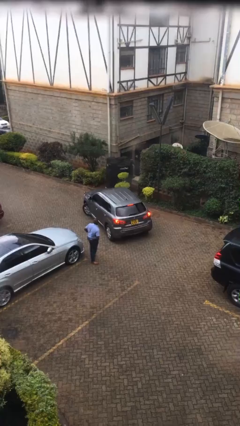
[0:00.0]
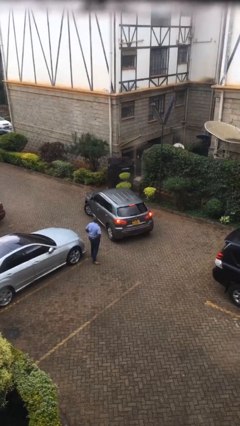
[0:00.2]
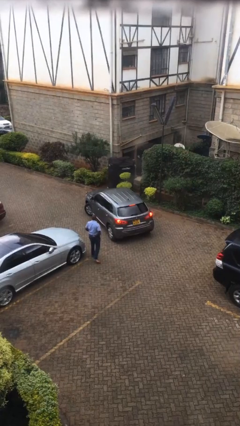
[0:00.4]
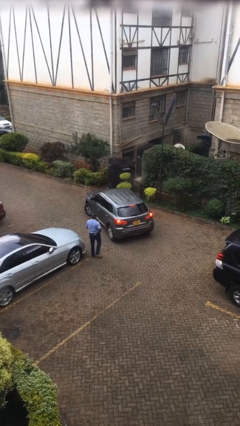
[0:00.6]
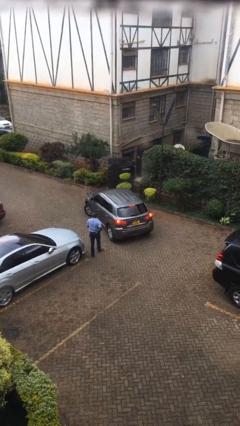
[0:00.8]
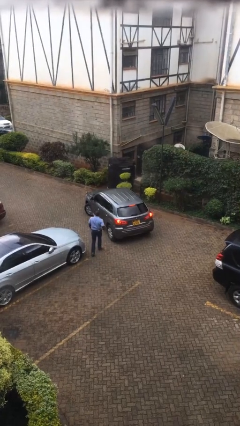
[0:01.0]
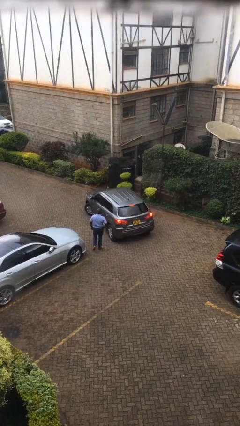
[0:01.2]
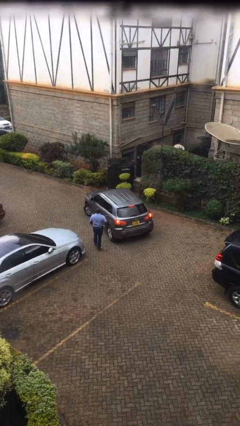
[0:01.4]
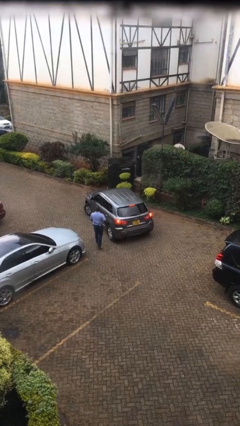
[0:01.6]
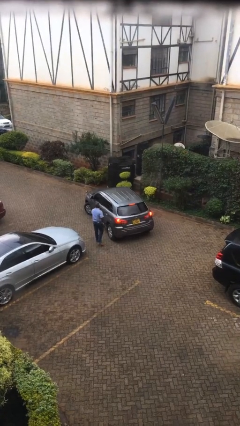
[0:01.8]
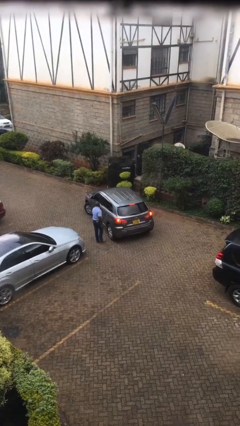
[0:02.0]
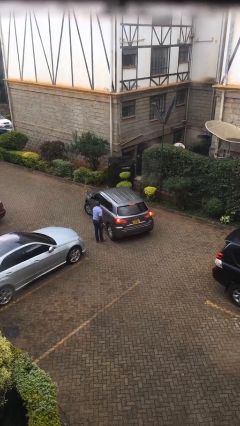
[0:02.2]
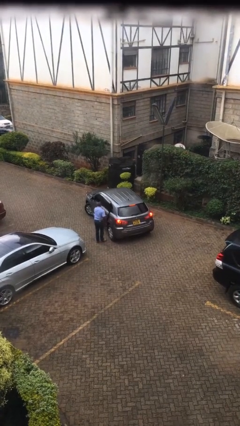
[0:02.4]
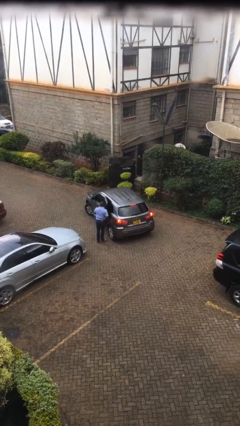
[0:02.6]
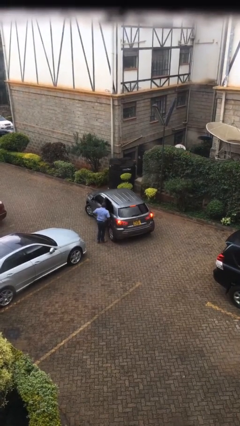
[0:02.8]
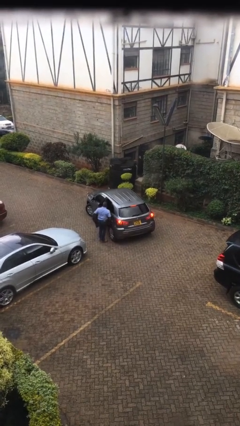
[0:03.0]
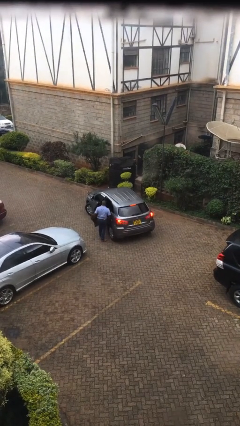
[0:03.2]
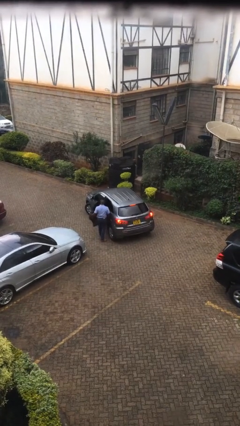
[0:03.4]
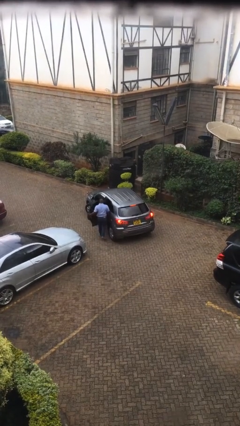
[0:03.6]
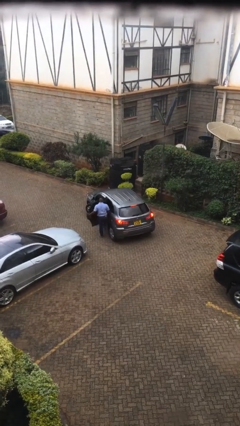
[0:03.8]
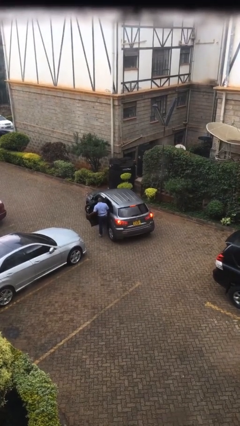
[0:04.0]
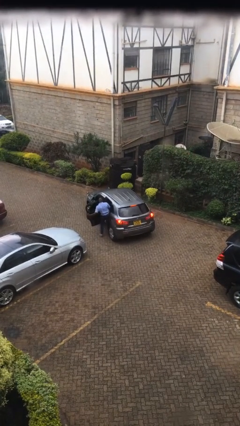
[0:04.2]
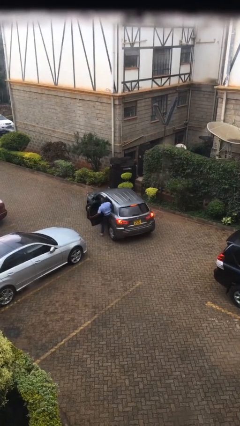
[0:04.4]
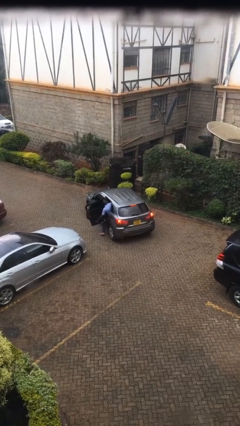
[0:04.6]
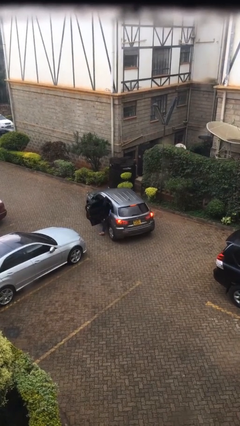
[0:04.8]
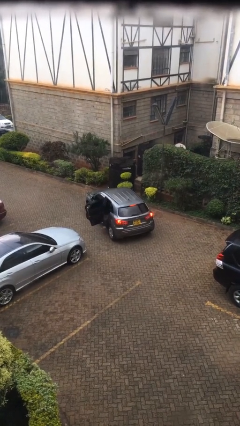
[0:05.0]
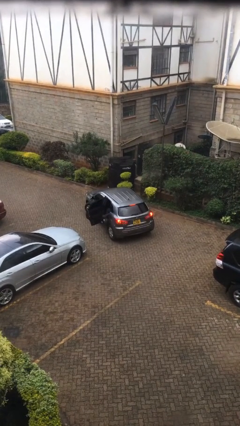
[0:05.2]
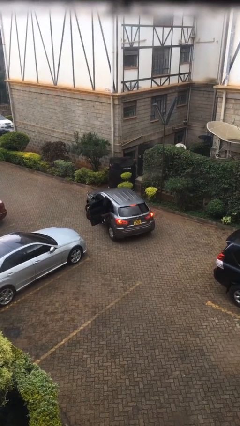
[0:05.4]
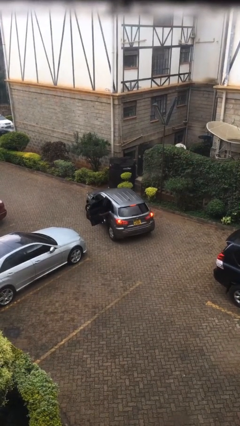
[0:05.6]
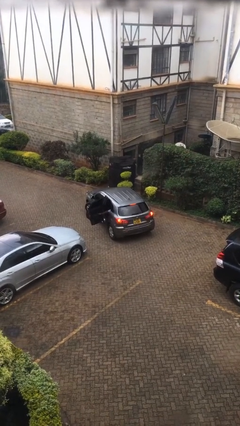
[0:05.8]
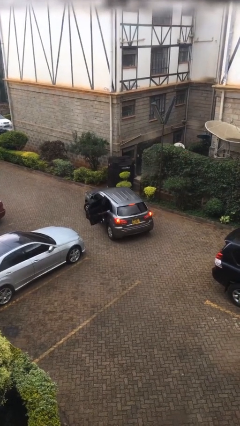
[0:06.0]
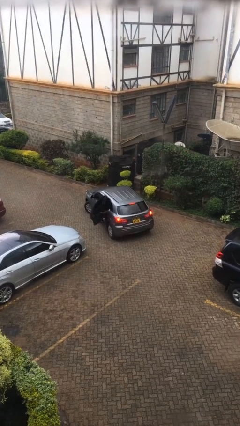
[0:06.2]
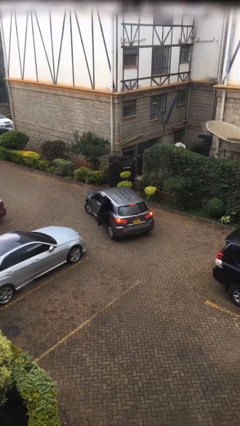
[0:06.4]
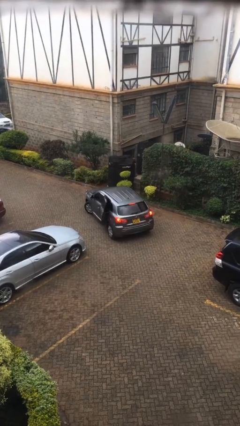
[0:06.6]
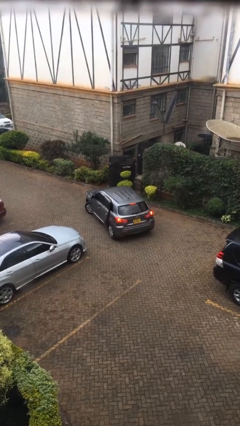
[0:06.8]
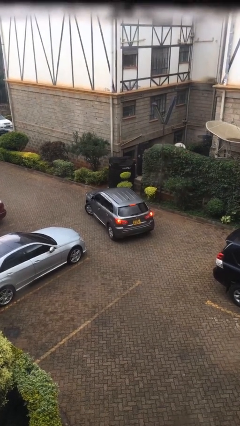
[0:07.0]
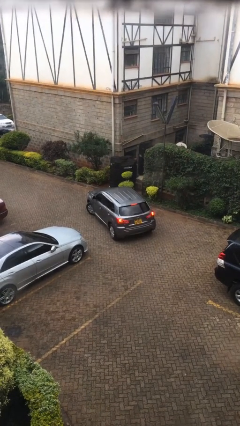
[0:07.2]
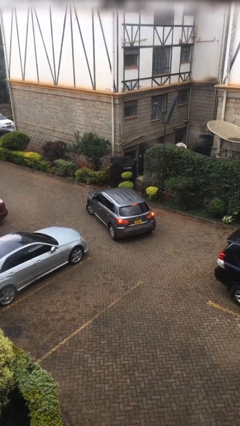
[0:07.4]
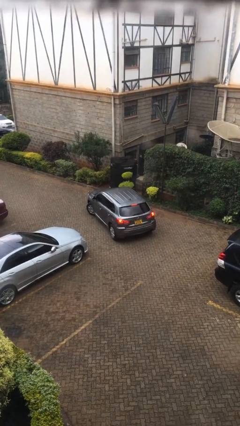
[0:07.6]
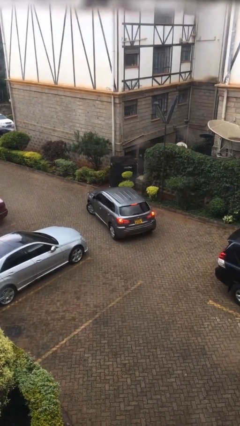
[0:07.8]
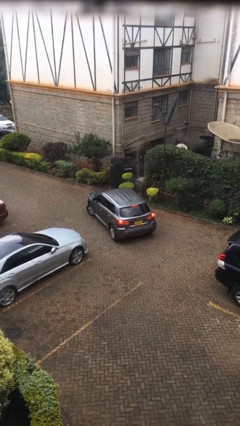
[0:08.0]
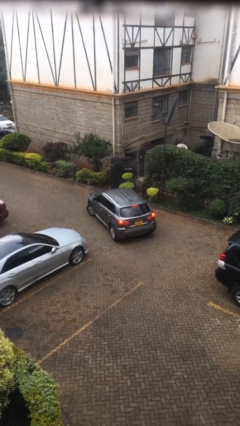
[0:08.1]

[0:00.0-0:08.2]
car picks up person

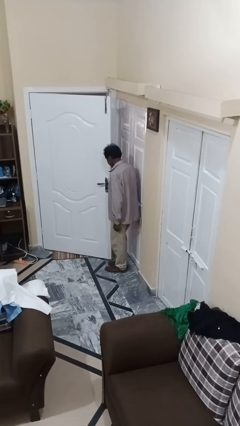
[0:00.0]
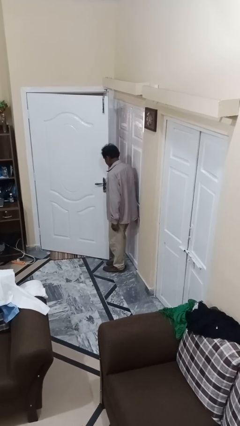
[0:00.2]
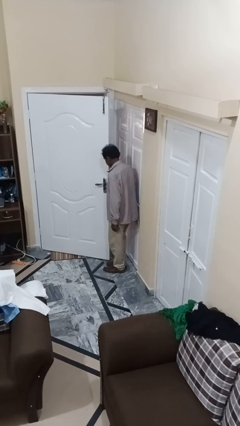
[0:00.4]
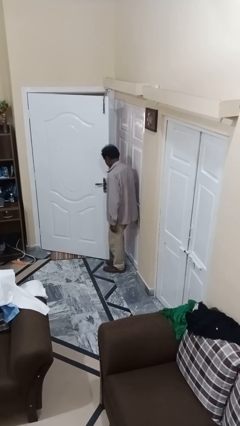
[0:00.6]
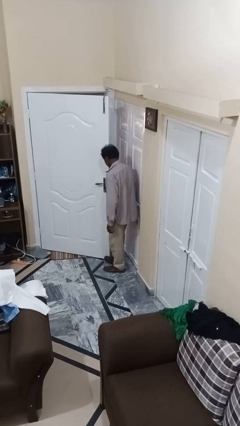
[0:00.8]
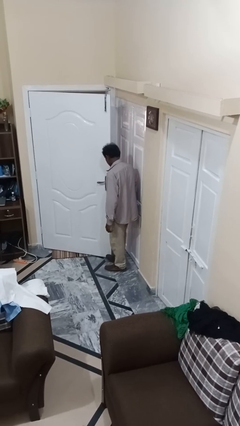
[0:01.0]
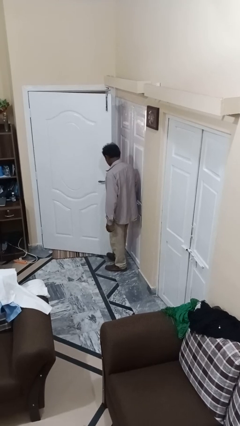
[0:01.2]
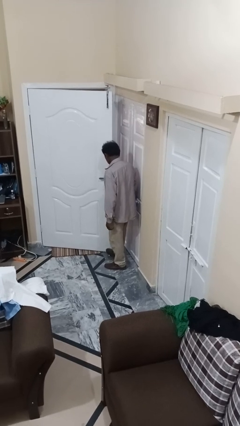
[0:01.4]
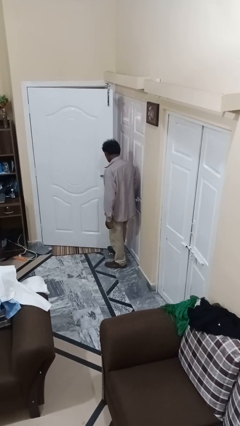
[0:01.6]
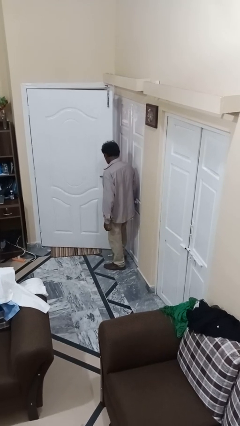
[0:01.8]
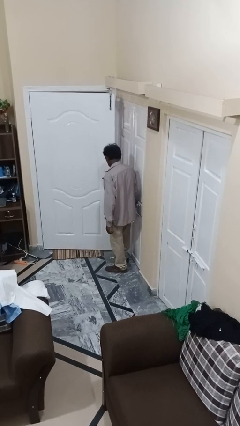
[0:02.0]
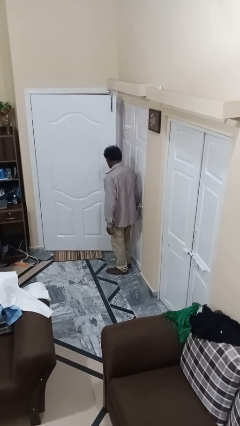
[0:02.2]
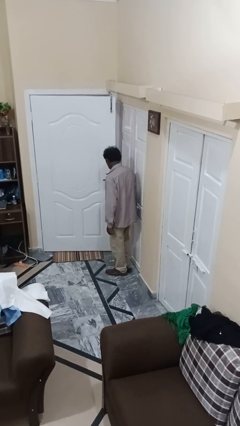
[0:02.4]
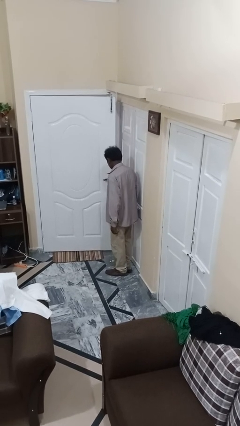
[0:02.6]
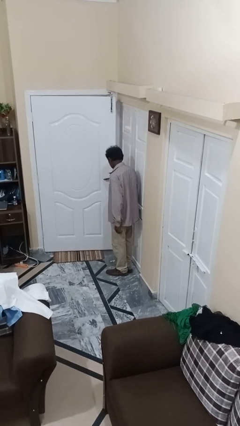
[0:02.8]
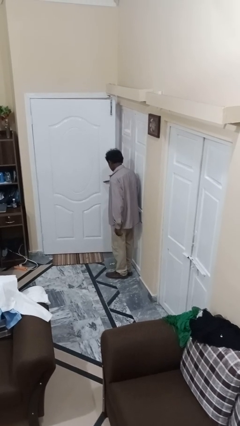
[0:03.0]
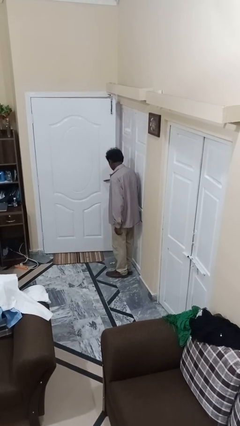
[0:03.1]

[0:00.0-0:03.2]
person closes door with foot

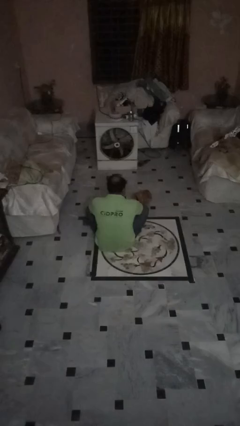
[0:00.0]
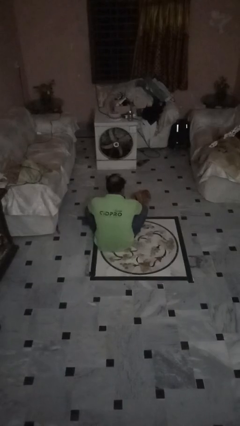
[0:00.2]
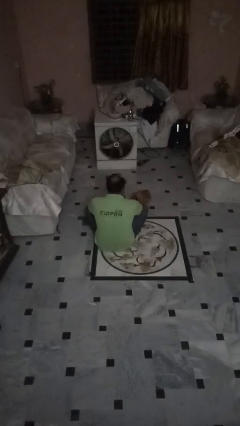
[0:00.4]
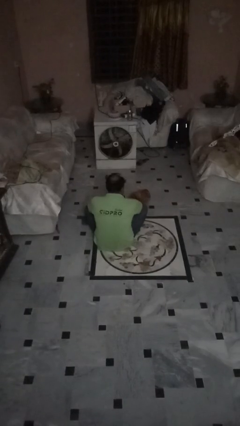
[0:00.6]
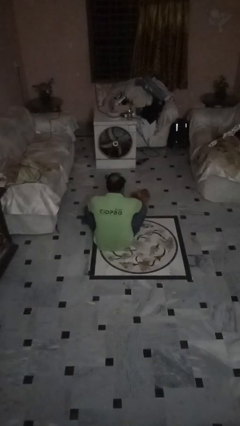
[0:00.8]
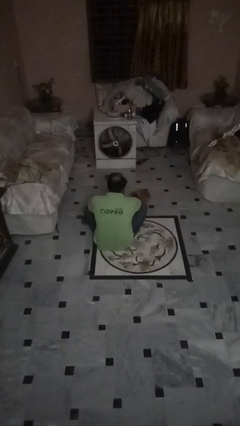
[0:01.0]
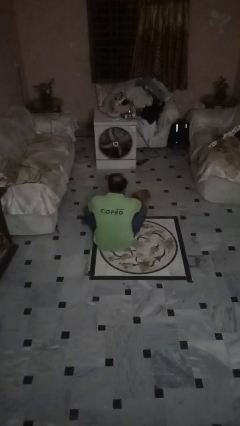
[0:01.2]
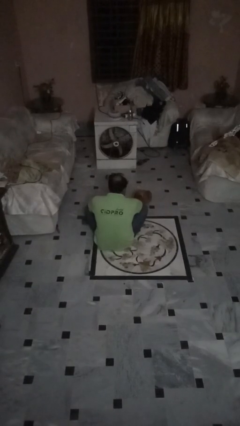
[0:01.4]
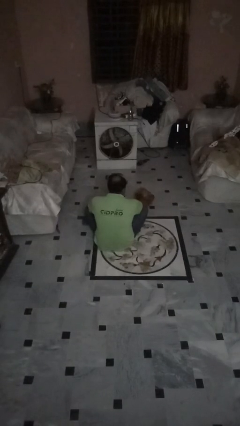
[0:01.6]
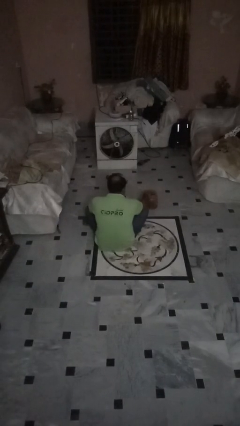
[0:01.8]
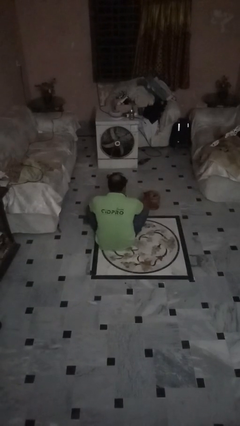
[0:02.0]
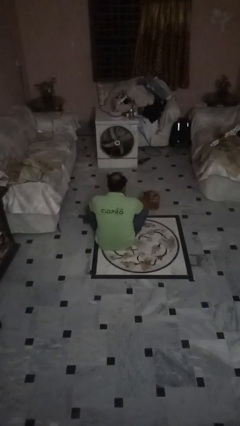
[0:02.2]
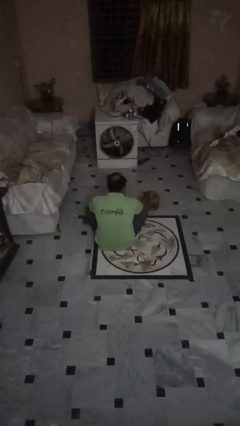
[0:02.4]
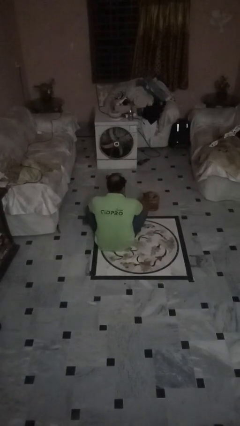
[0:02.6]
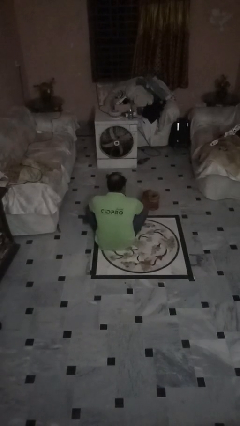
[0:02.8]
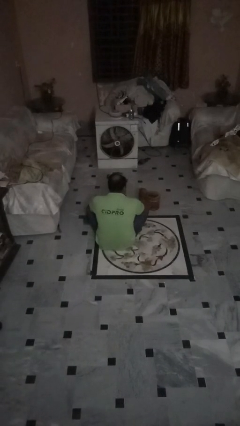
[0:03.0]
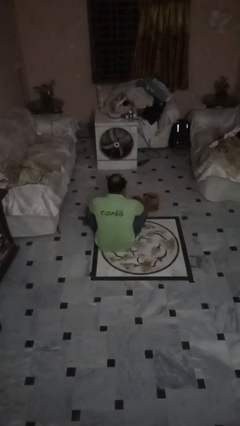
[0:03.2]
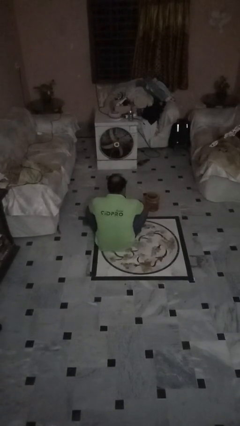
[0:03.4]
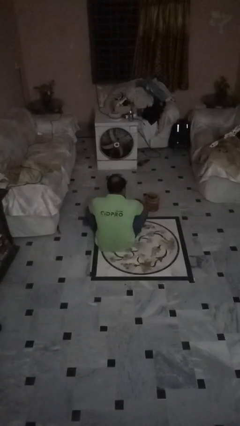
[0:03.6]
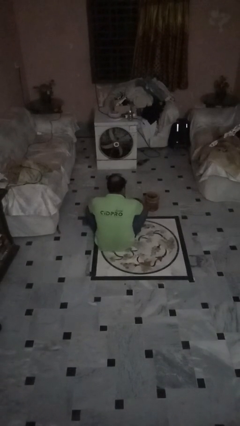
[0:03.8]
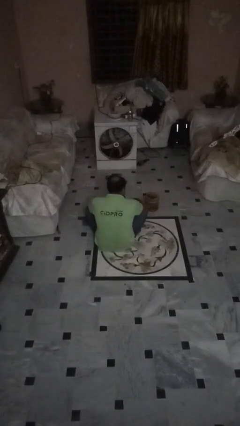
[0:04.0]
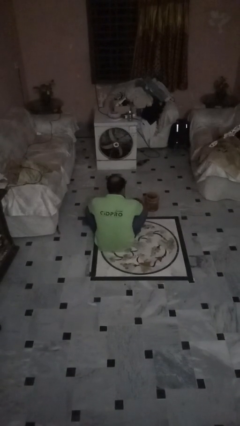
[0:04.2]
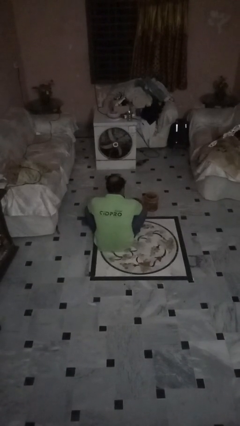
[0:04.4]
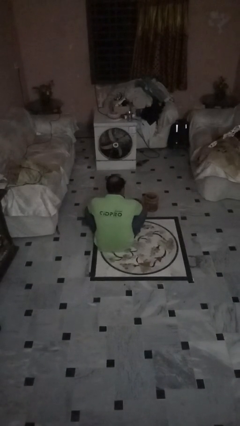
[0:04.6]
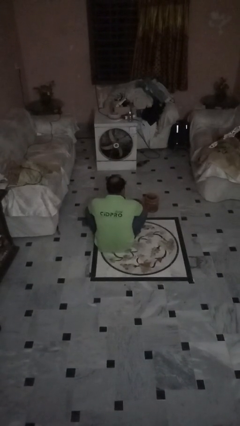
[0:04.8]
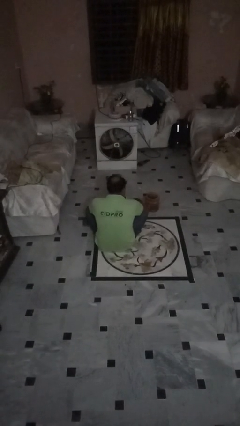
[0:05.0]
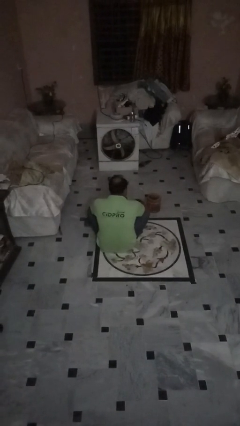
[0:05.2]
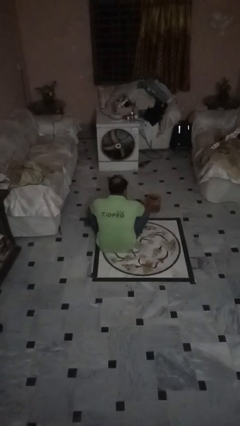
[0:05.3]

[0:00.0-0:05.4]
person sets upright furniture

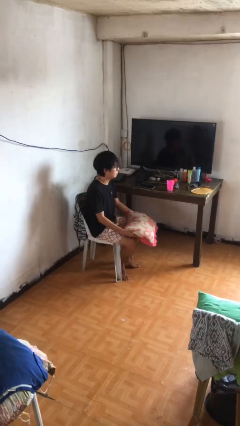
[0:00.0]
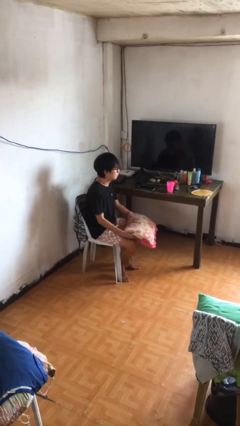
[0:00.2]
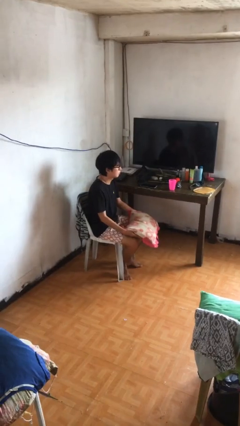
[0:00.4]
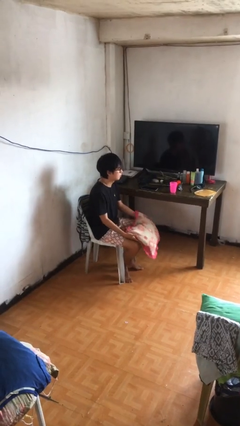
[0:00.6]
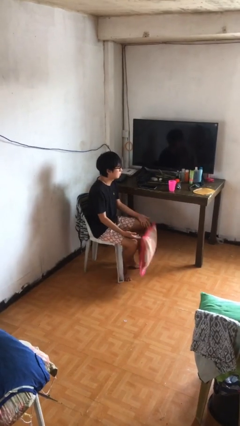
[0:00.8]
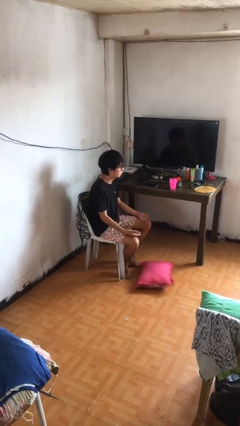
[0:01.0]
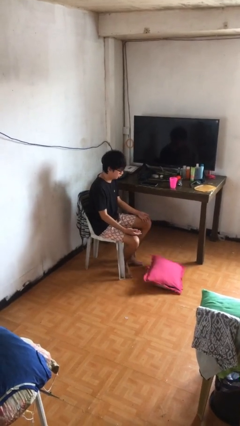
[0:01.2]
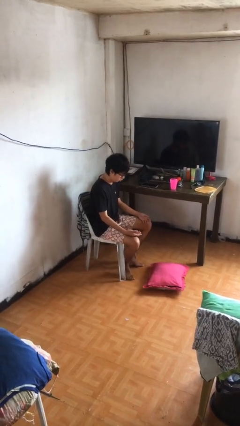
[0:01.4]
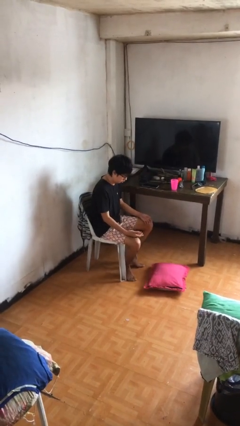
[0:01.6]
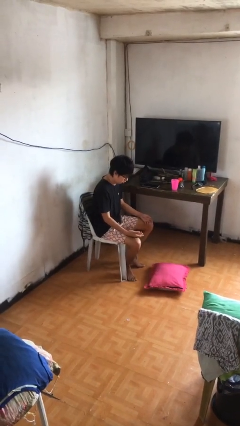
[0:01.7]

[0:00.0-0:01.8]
person drops object
